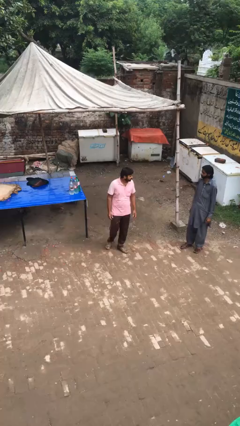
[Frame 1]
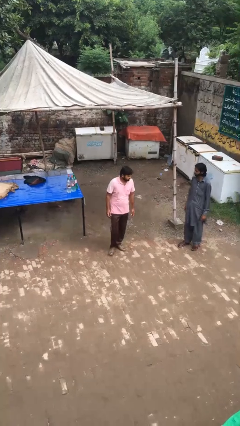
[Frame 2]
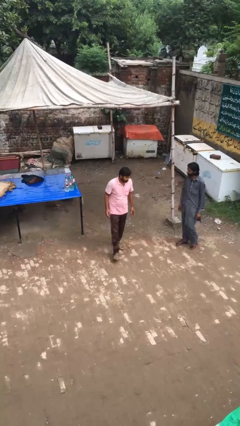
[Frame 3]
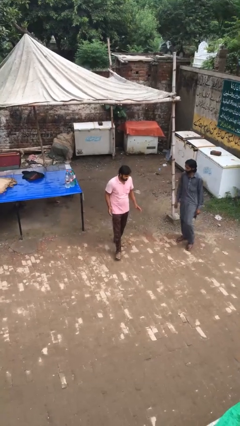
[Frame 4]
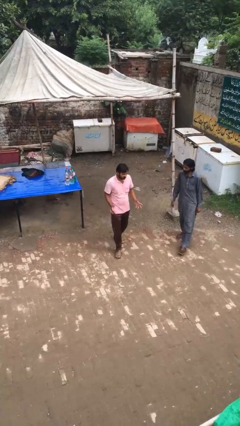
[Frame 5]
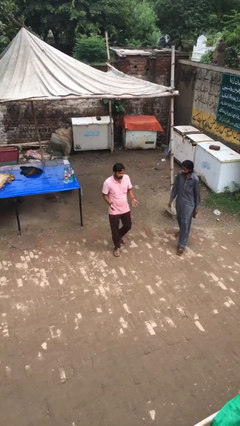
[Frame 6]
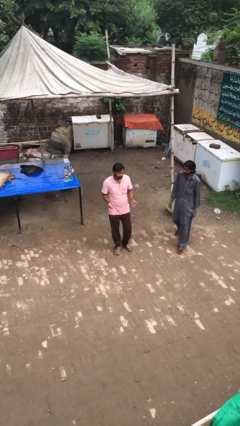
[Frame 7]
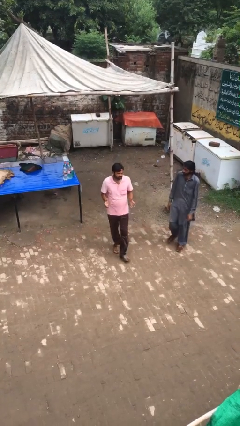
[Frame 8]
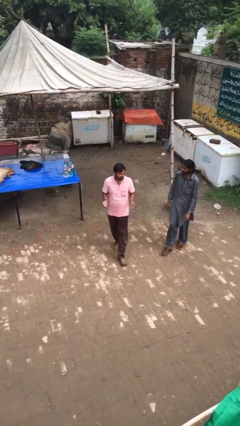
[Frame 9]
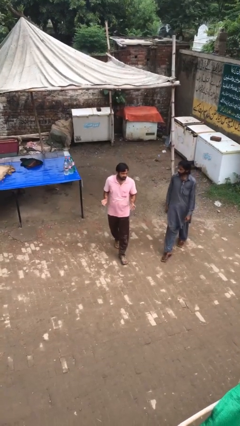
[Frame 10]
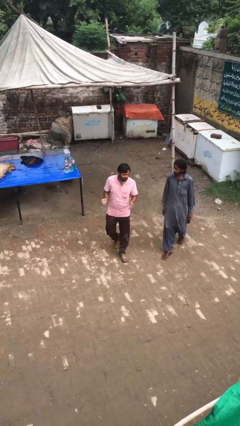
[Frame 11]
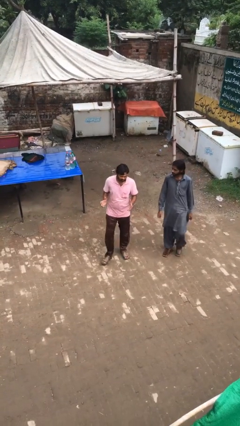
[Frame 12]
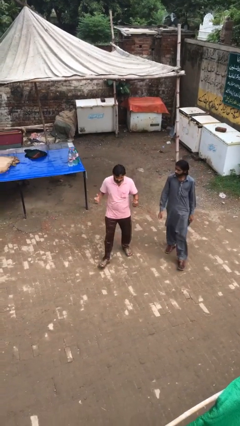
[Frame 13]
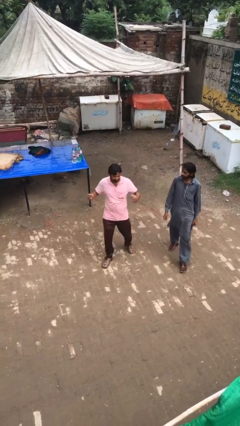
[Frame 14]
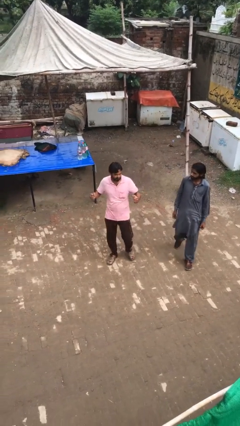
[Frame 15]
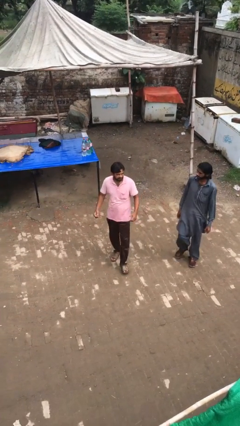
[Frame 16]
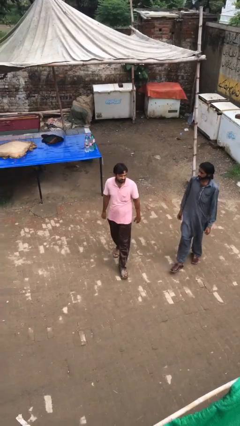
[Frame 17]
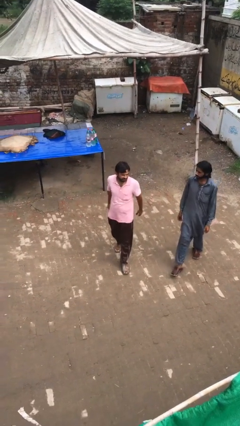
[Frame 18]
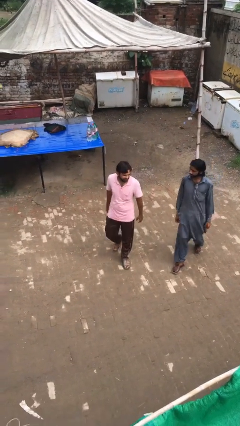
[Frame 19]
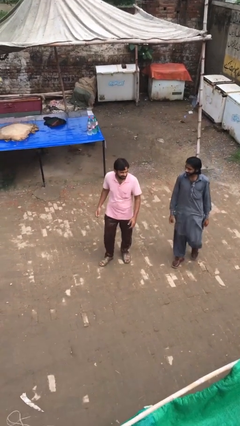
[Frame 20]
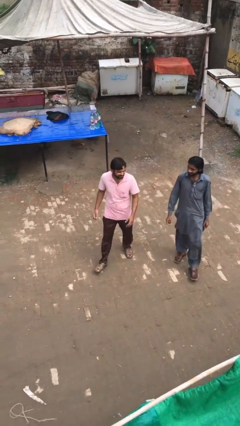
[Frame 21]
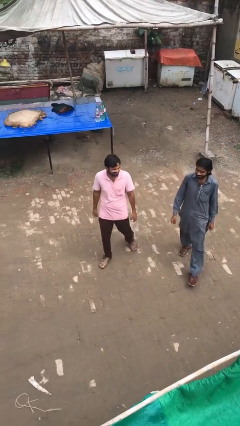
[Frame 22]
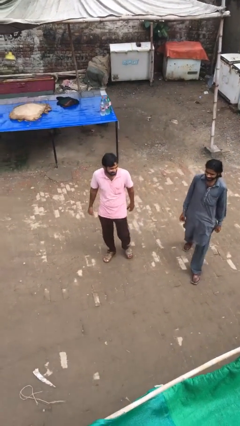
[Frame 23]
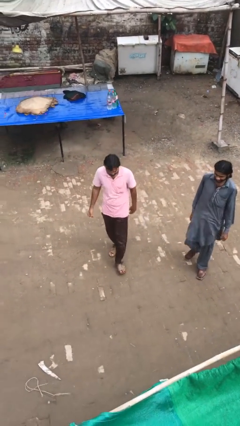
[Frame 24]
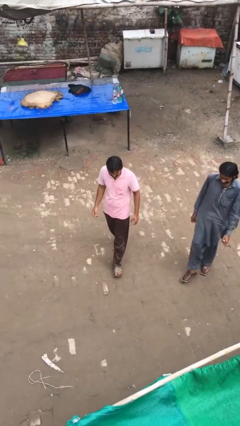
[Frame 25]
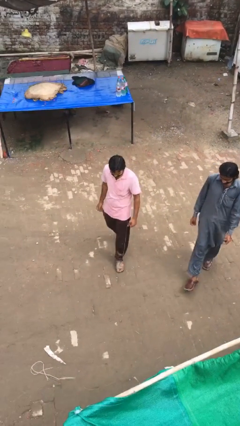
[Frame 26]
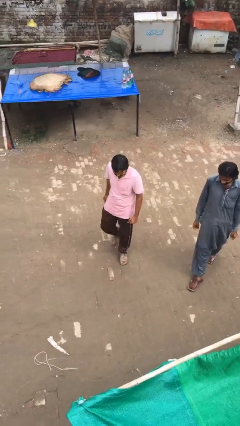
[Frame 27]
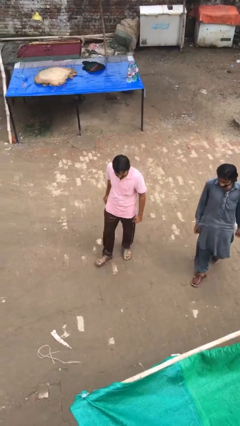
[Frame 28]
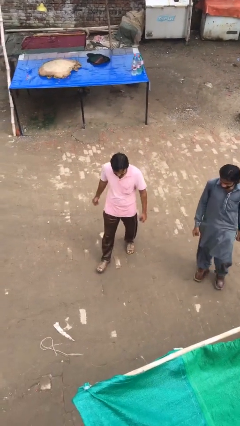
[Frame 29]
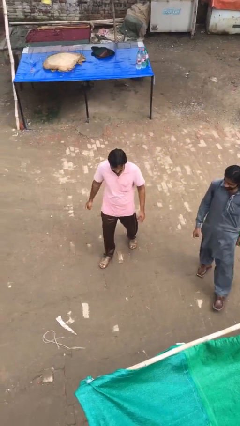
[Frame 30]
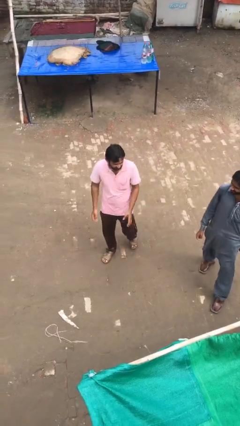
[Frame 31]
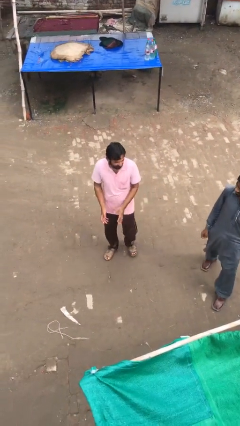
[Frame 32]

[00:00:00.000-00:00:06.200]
person talks to person

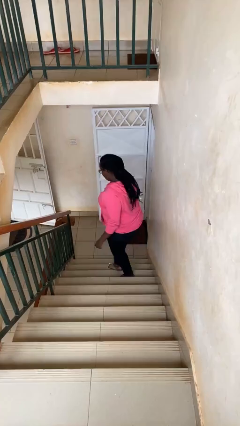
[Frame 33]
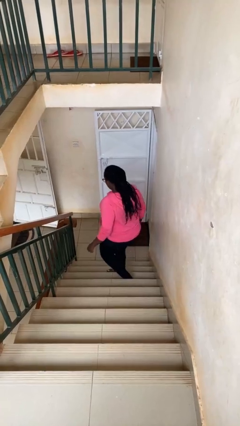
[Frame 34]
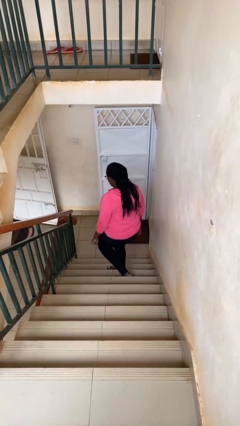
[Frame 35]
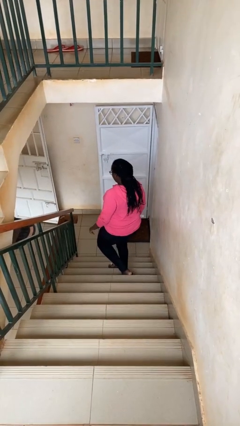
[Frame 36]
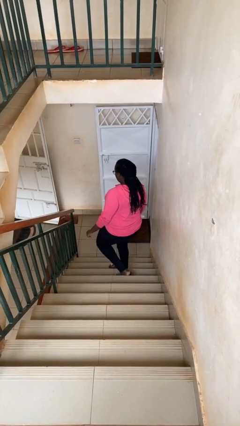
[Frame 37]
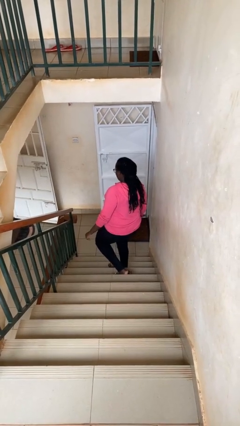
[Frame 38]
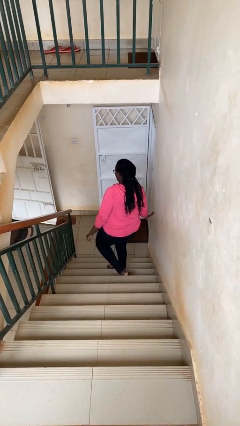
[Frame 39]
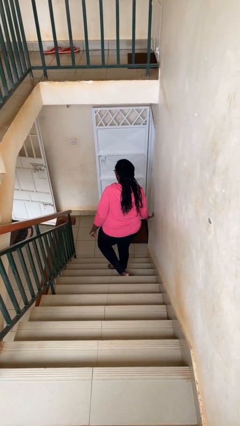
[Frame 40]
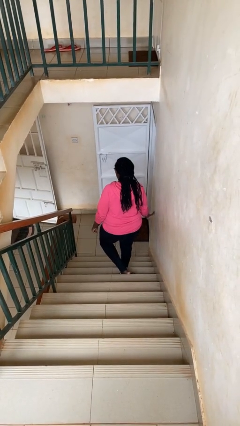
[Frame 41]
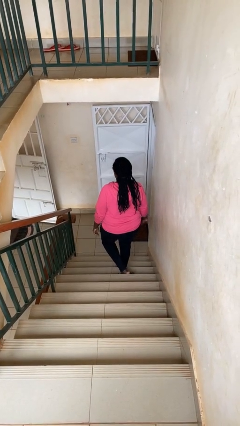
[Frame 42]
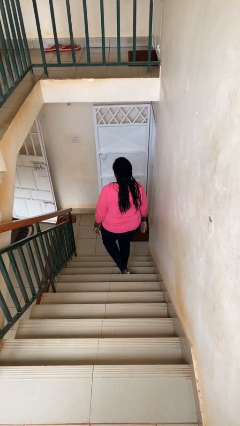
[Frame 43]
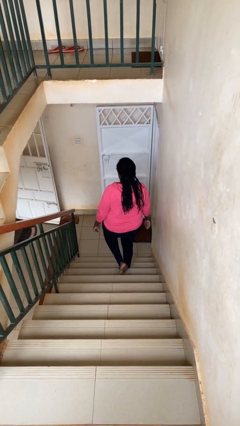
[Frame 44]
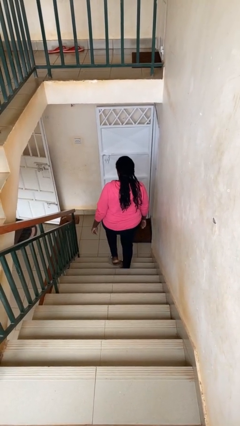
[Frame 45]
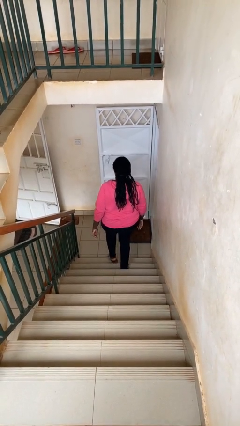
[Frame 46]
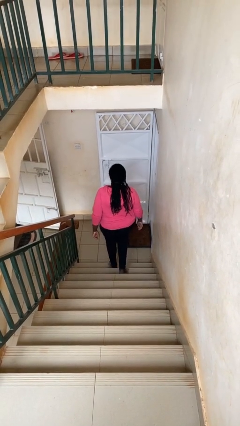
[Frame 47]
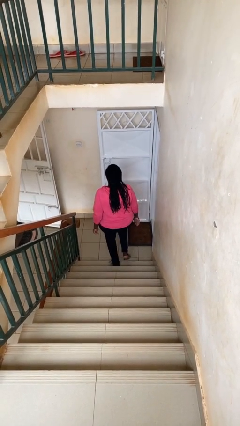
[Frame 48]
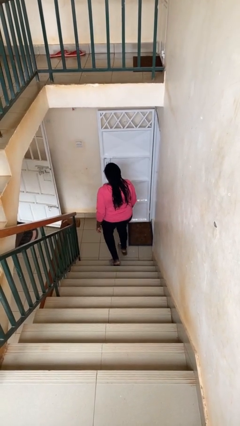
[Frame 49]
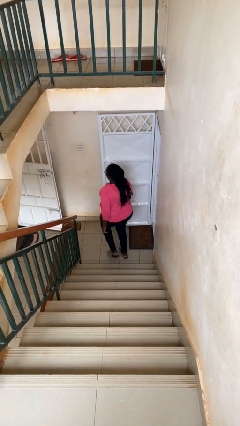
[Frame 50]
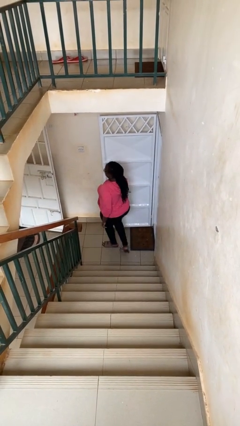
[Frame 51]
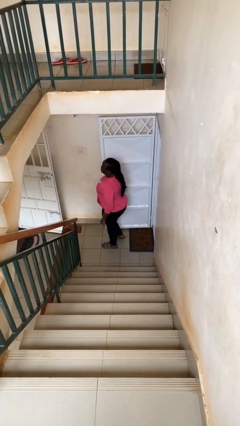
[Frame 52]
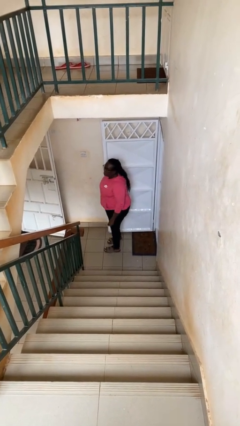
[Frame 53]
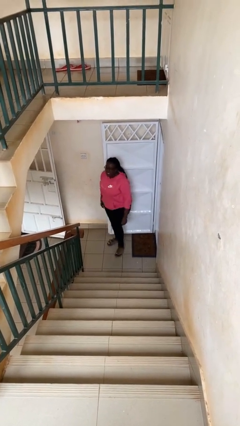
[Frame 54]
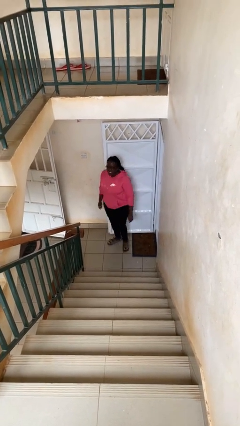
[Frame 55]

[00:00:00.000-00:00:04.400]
person climbs down stairs

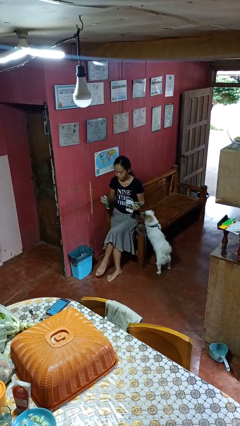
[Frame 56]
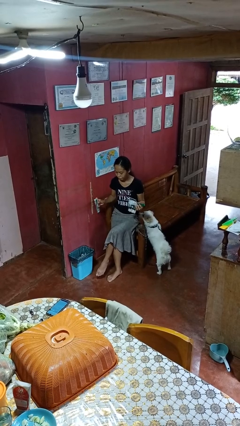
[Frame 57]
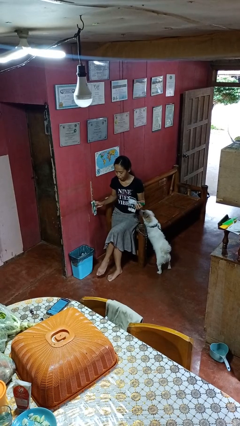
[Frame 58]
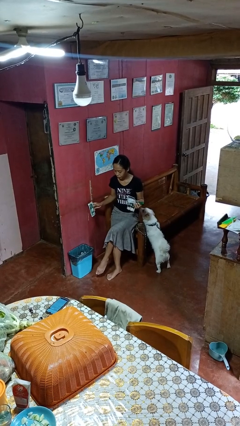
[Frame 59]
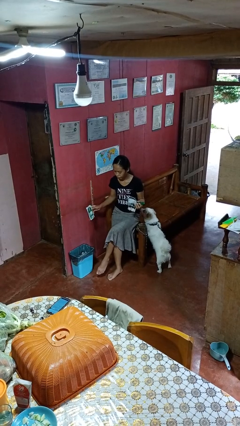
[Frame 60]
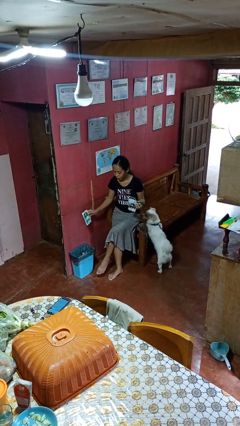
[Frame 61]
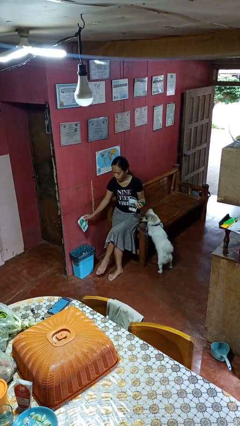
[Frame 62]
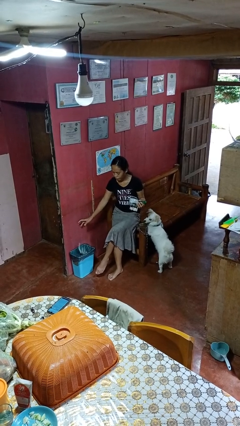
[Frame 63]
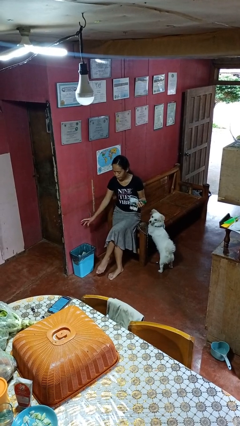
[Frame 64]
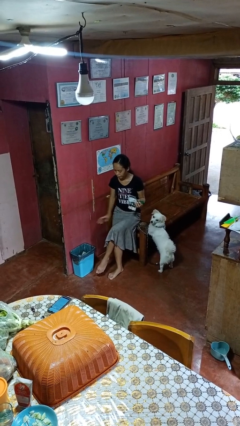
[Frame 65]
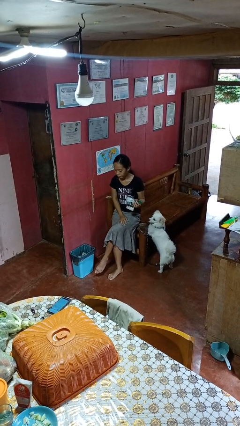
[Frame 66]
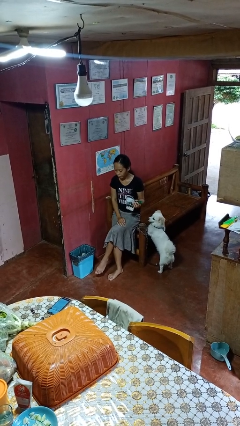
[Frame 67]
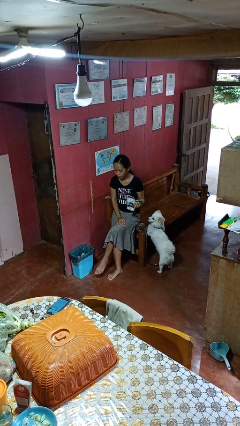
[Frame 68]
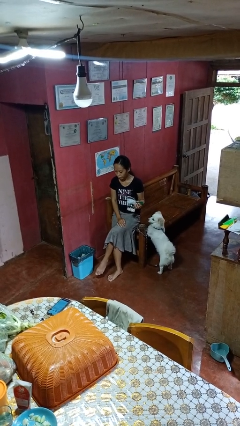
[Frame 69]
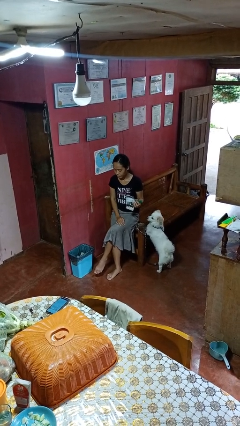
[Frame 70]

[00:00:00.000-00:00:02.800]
person discards trash

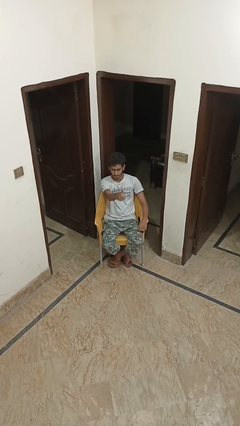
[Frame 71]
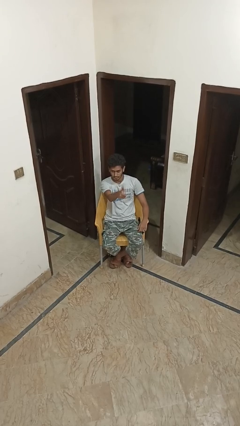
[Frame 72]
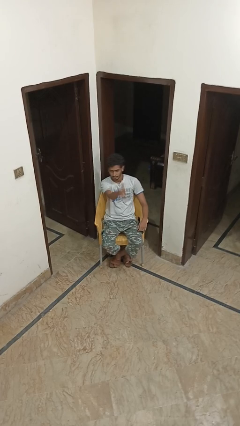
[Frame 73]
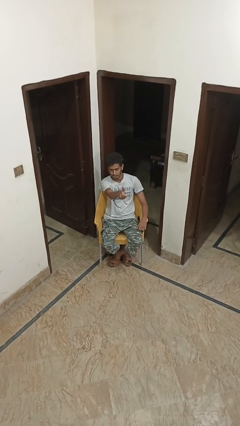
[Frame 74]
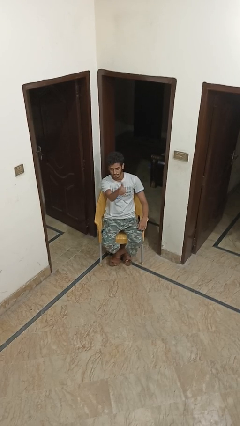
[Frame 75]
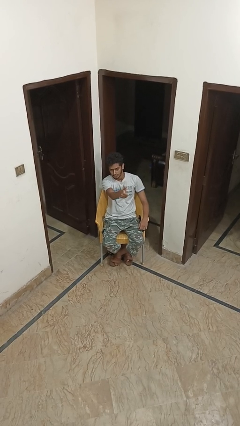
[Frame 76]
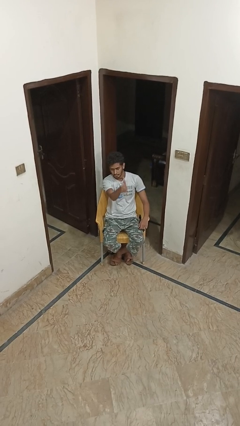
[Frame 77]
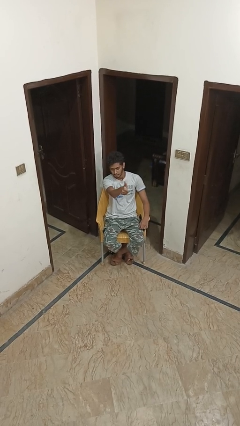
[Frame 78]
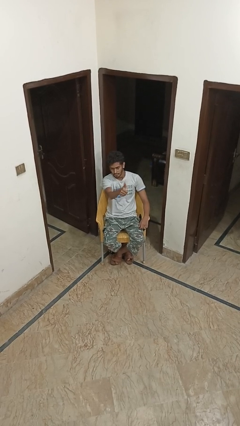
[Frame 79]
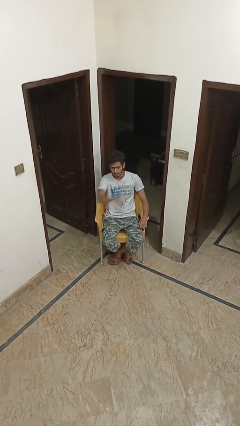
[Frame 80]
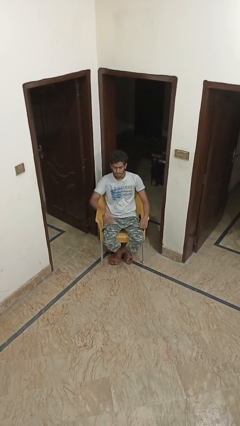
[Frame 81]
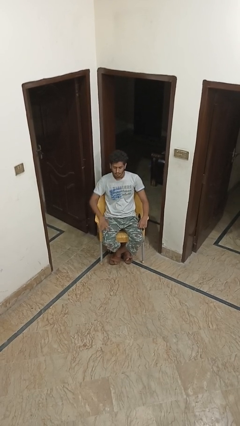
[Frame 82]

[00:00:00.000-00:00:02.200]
person gestures thumbs up

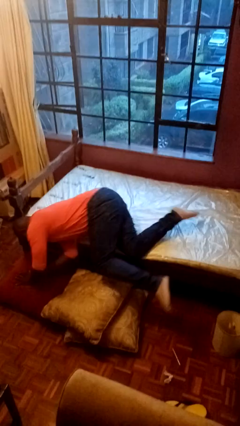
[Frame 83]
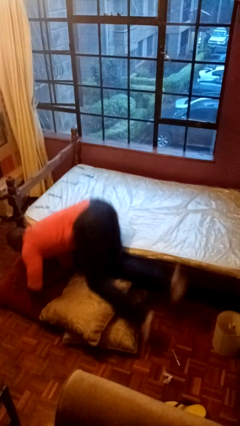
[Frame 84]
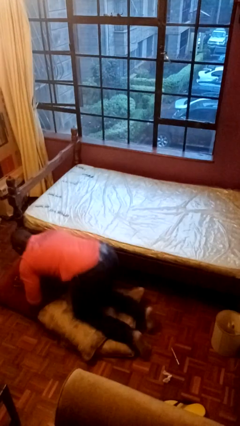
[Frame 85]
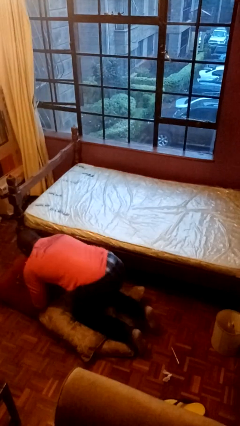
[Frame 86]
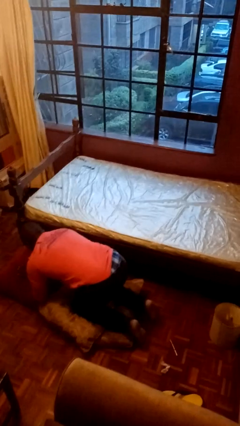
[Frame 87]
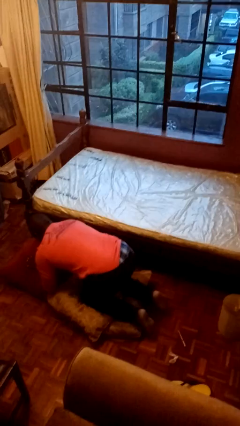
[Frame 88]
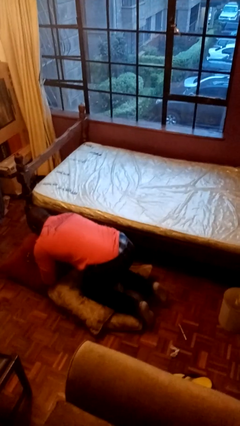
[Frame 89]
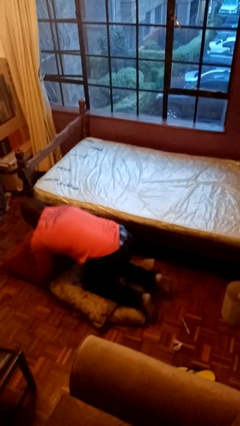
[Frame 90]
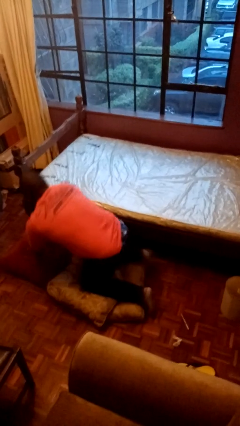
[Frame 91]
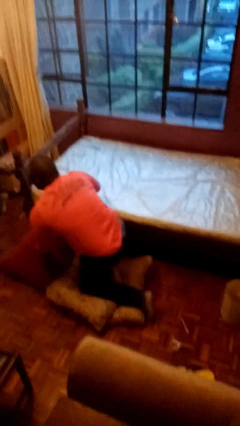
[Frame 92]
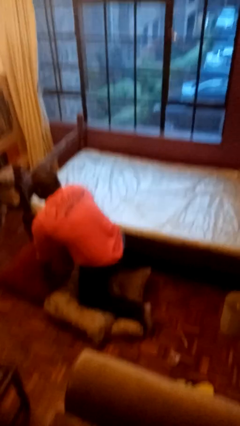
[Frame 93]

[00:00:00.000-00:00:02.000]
person falls from bed
